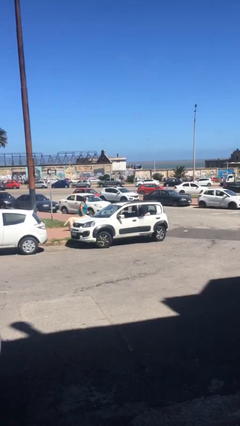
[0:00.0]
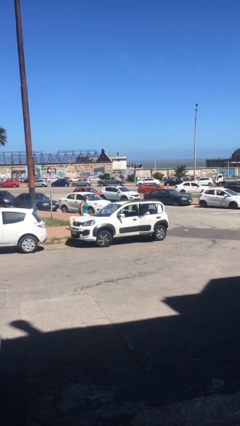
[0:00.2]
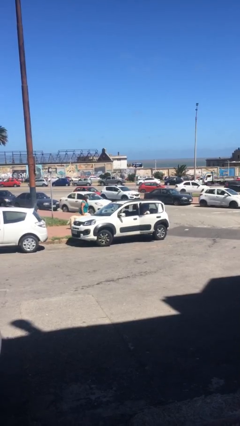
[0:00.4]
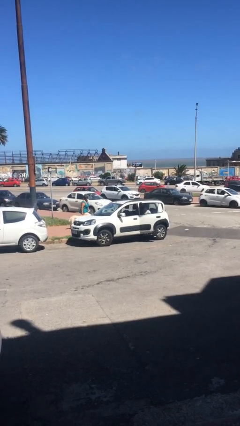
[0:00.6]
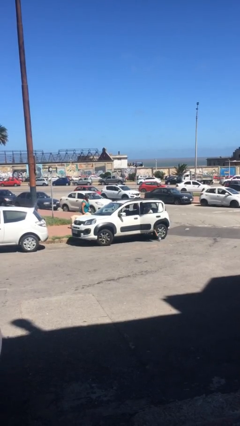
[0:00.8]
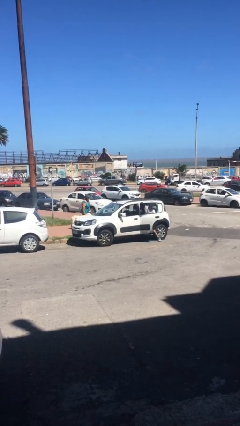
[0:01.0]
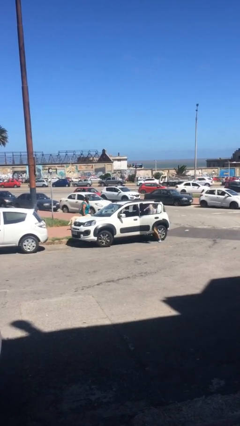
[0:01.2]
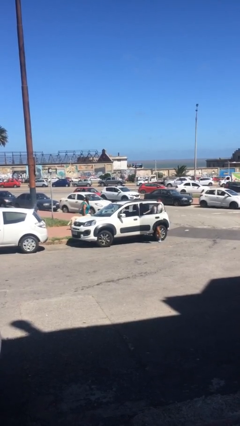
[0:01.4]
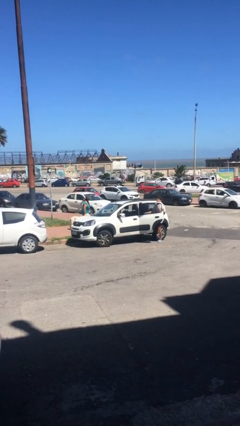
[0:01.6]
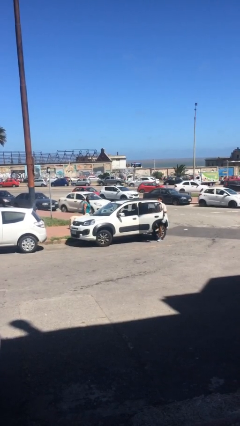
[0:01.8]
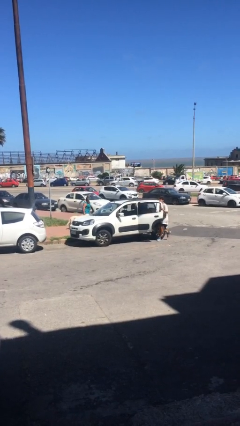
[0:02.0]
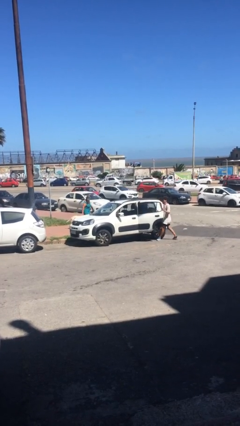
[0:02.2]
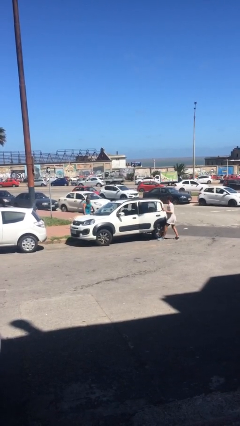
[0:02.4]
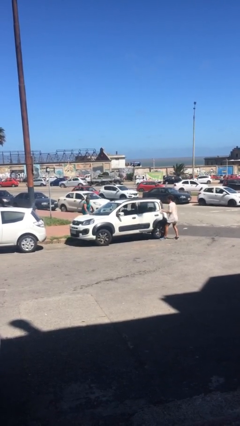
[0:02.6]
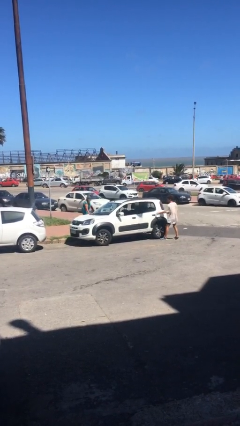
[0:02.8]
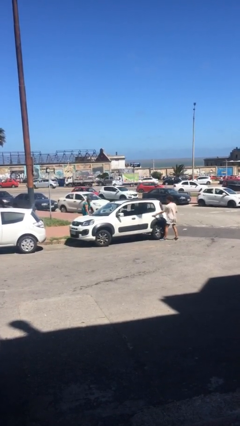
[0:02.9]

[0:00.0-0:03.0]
car drops off person

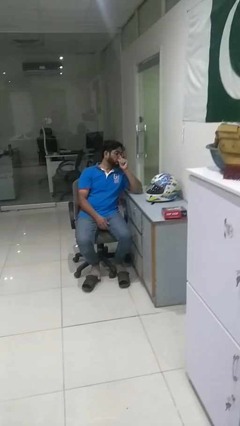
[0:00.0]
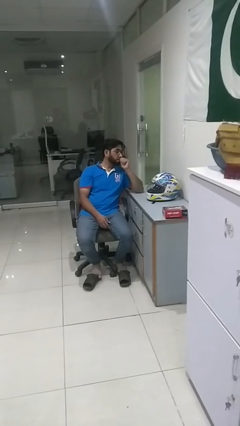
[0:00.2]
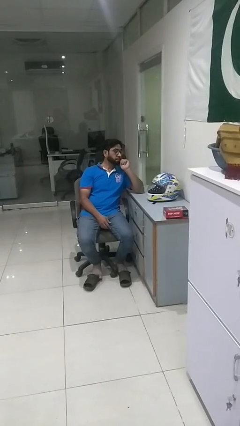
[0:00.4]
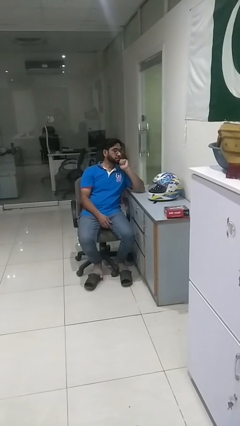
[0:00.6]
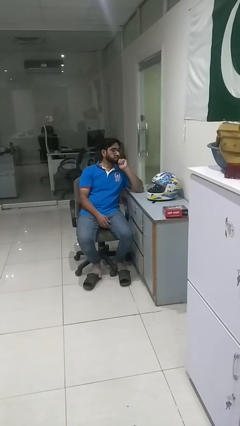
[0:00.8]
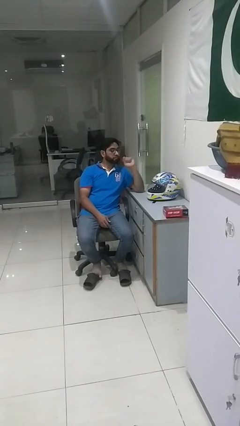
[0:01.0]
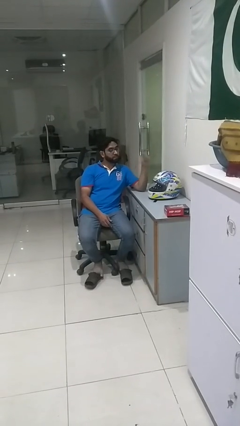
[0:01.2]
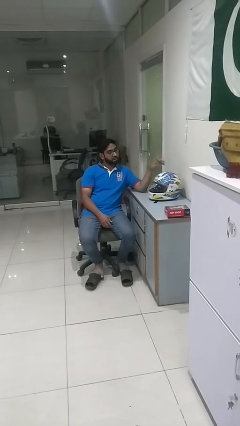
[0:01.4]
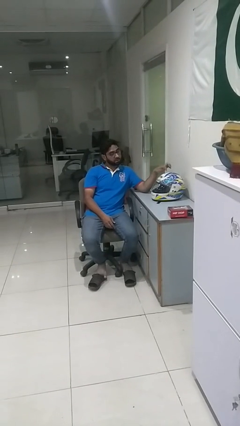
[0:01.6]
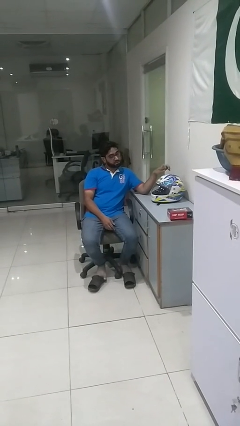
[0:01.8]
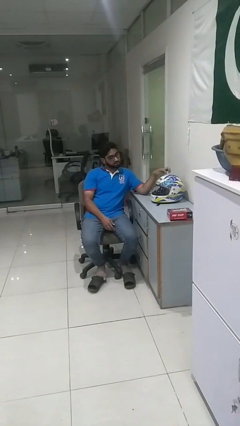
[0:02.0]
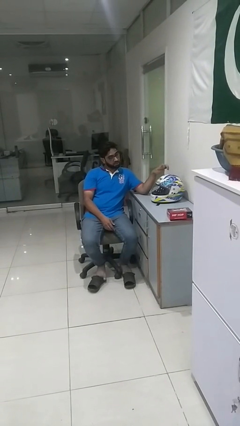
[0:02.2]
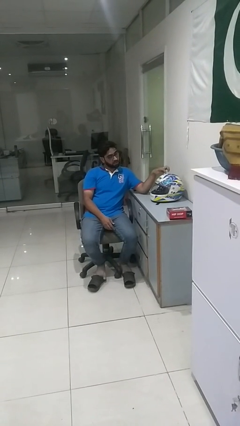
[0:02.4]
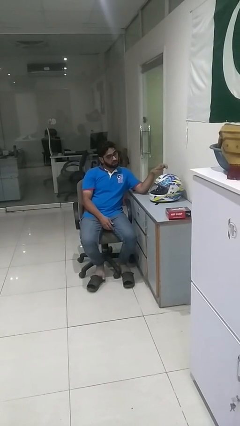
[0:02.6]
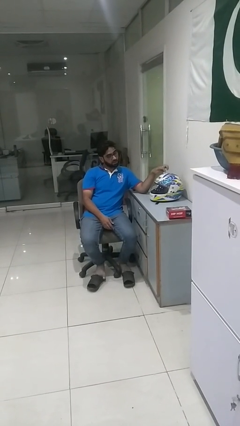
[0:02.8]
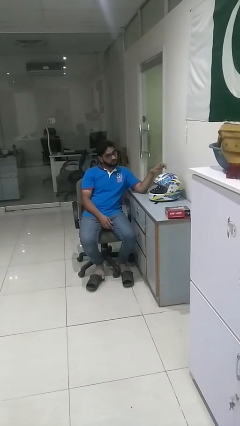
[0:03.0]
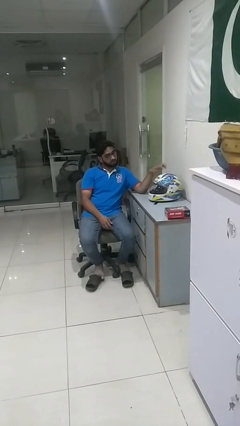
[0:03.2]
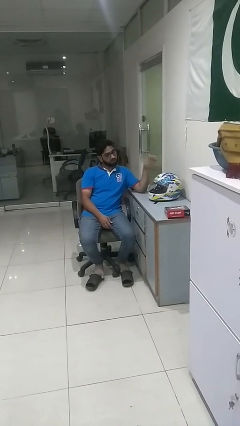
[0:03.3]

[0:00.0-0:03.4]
person taps object with finger

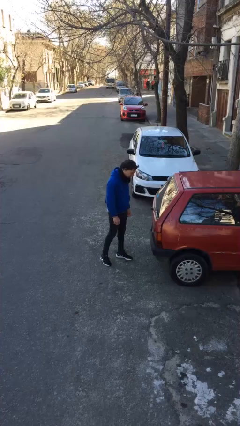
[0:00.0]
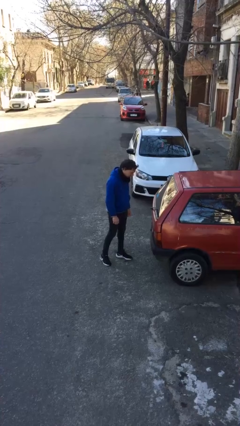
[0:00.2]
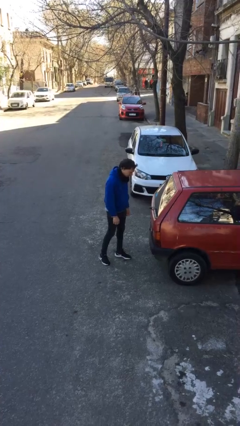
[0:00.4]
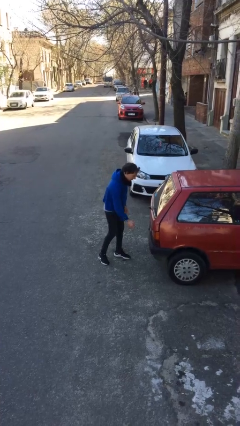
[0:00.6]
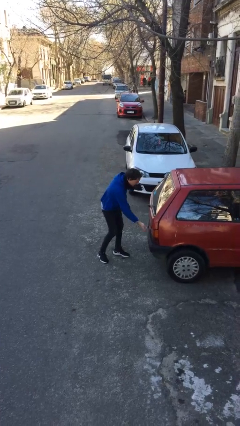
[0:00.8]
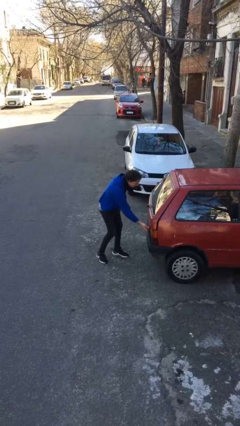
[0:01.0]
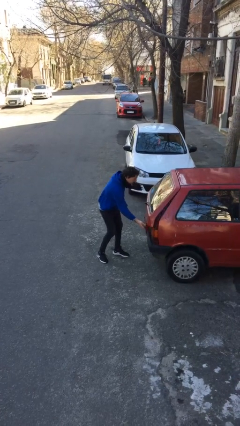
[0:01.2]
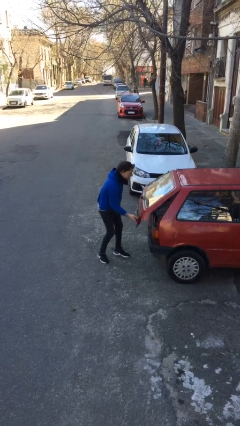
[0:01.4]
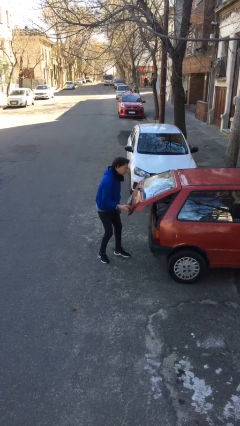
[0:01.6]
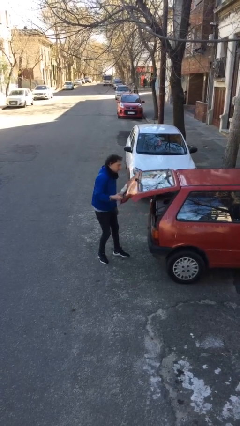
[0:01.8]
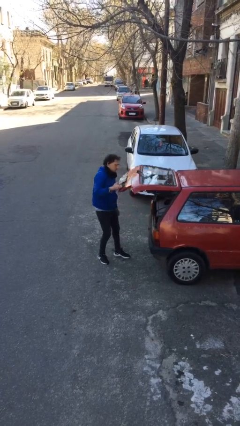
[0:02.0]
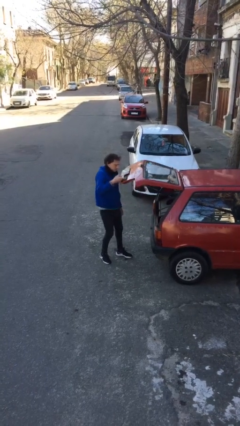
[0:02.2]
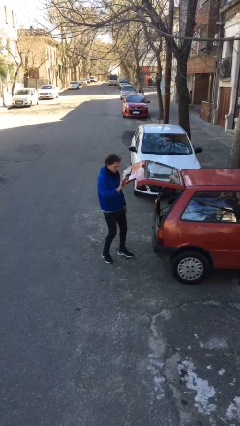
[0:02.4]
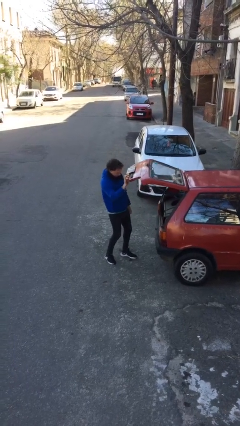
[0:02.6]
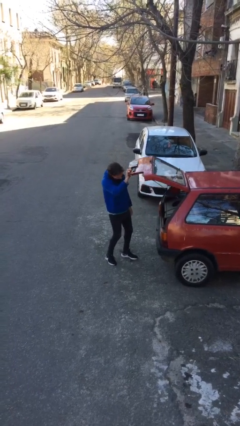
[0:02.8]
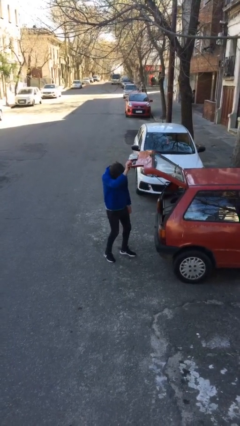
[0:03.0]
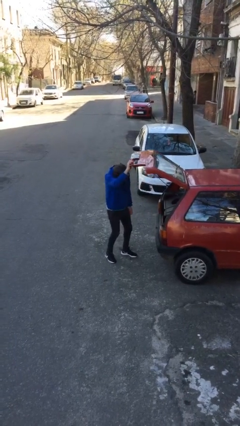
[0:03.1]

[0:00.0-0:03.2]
person opens car door

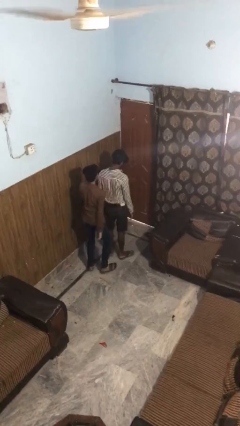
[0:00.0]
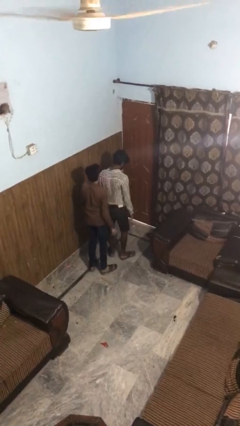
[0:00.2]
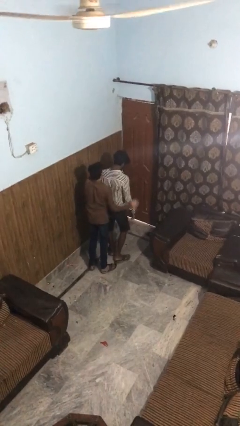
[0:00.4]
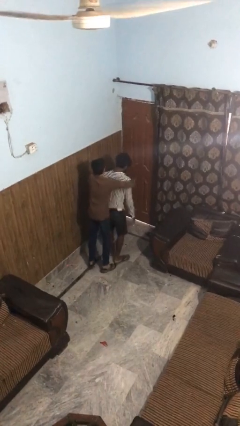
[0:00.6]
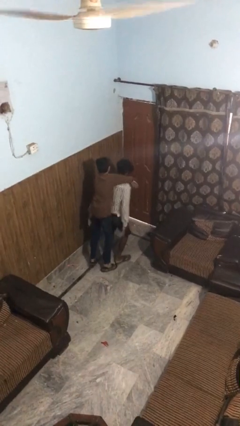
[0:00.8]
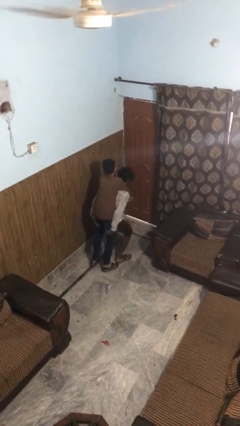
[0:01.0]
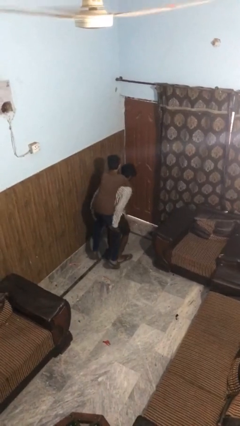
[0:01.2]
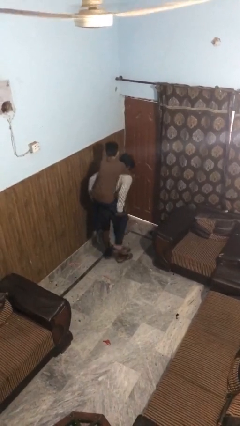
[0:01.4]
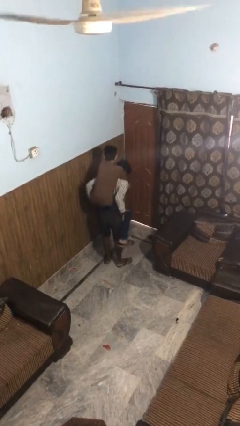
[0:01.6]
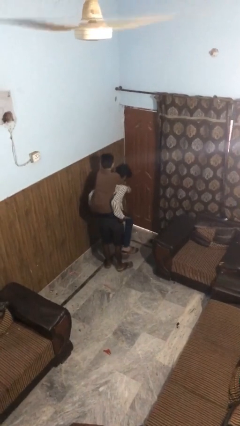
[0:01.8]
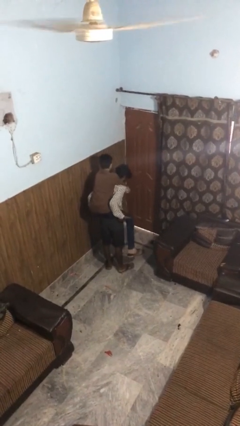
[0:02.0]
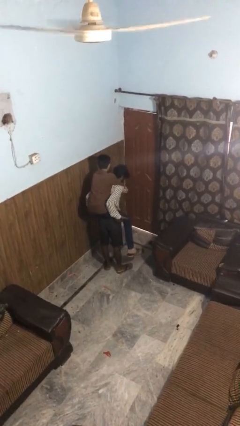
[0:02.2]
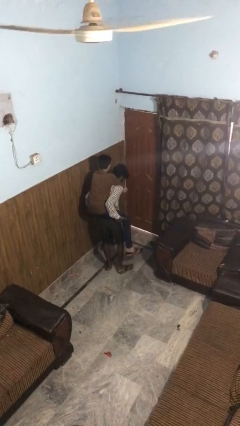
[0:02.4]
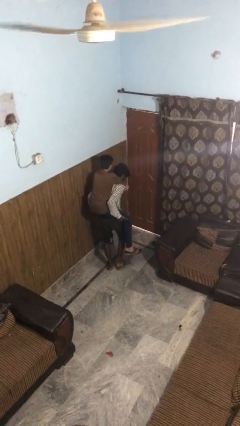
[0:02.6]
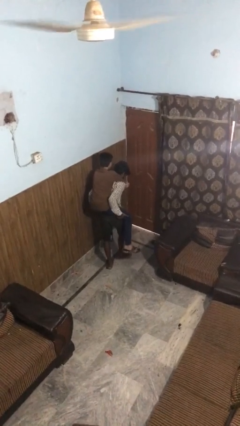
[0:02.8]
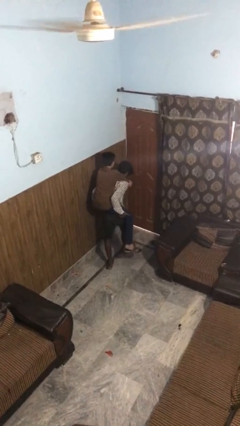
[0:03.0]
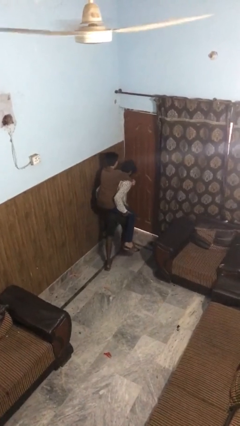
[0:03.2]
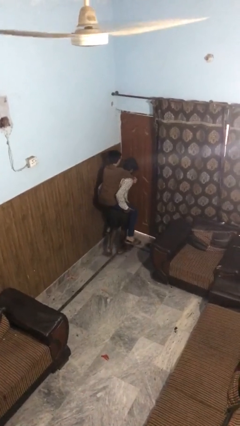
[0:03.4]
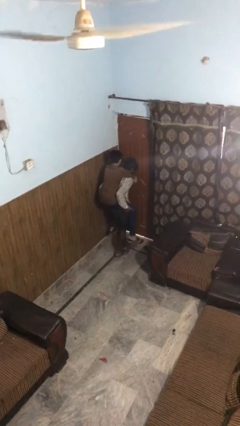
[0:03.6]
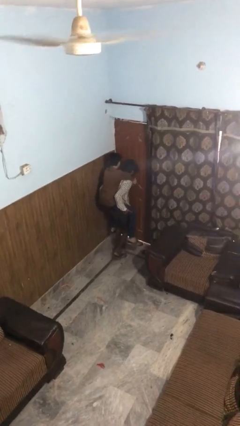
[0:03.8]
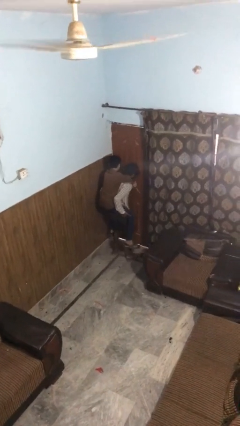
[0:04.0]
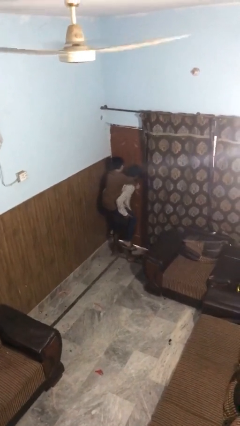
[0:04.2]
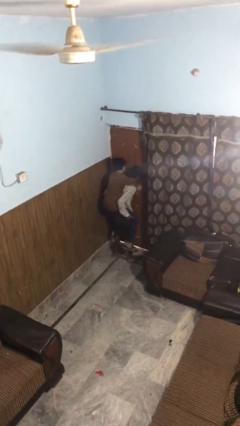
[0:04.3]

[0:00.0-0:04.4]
person carries person on back

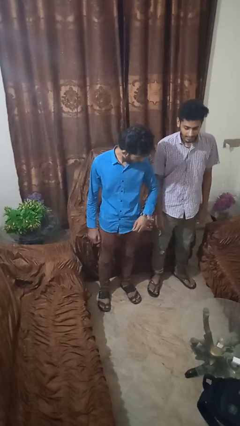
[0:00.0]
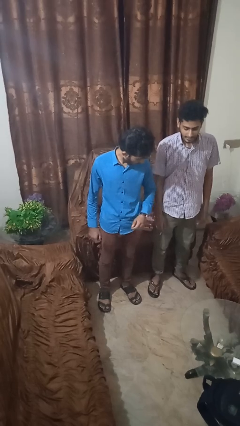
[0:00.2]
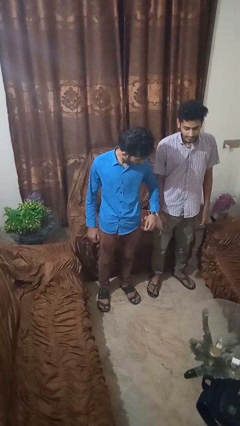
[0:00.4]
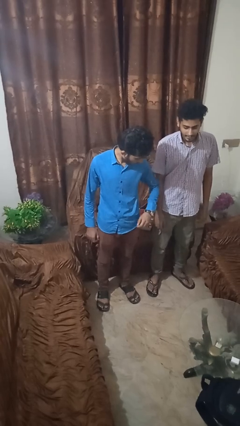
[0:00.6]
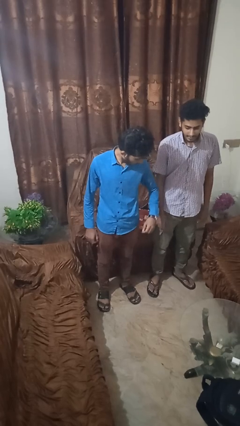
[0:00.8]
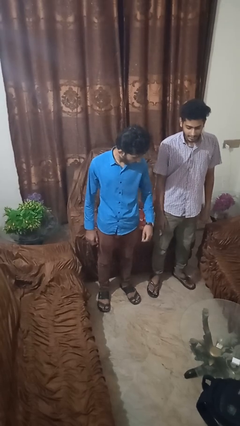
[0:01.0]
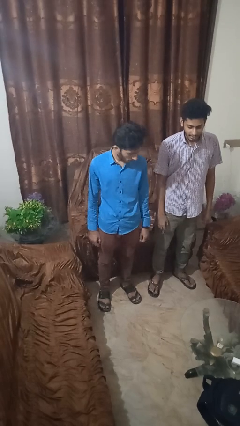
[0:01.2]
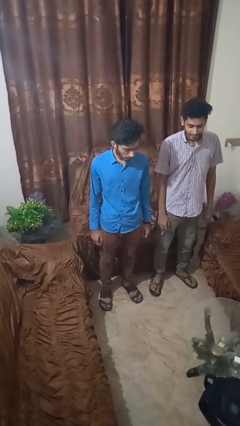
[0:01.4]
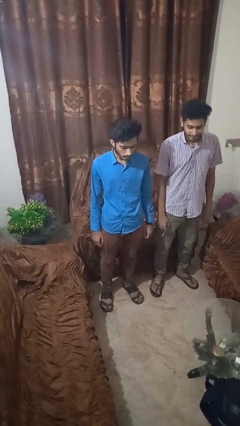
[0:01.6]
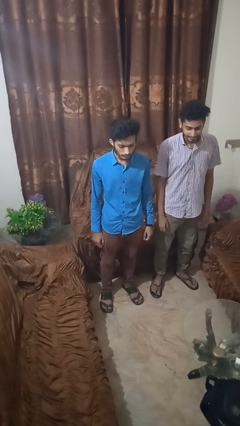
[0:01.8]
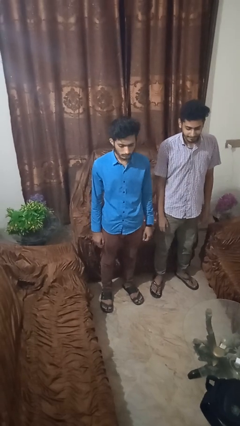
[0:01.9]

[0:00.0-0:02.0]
person nudges person with elbow

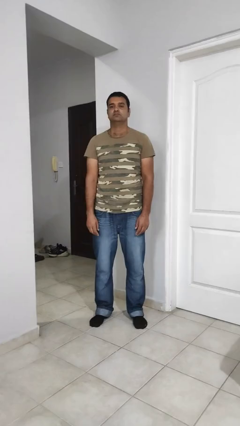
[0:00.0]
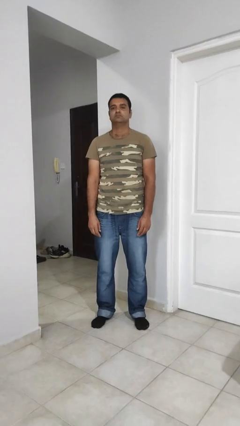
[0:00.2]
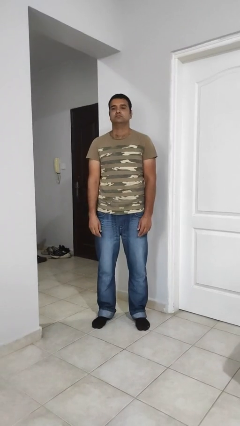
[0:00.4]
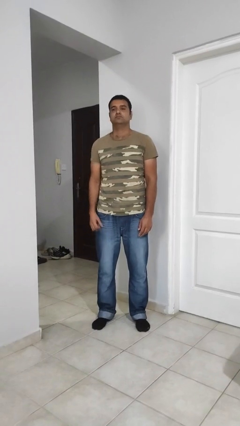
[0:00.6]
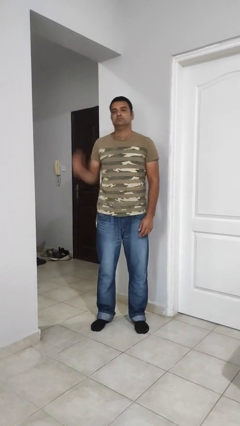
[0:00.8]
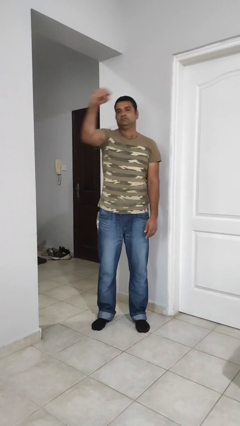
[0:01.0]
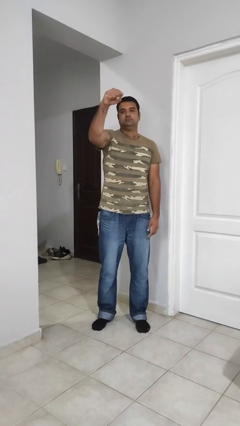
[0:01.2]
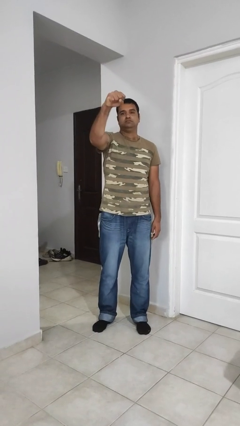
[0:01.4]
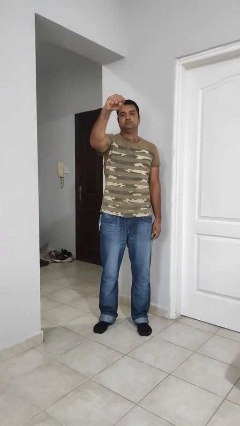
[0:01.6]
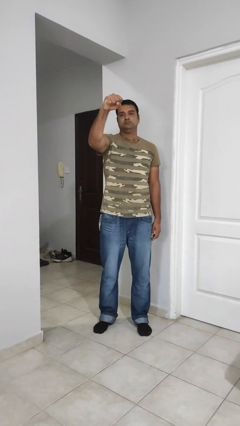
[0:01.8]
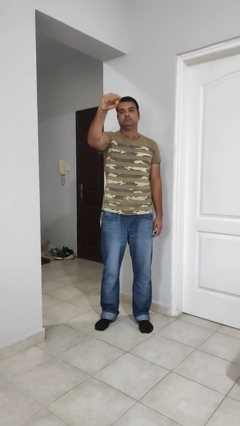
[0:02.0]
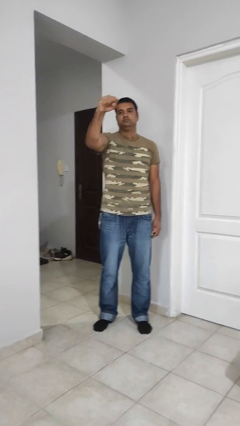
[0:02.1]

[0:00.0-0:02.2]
person punches
